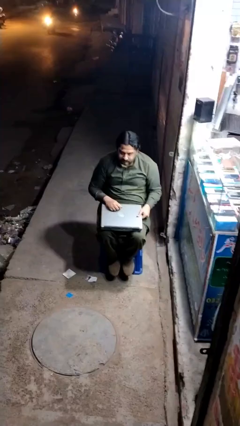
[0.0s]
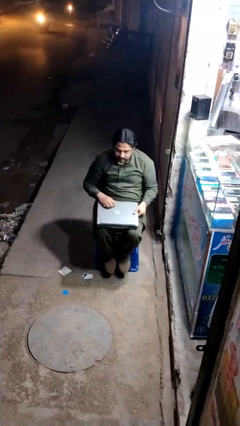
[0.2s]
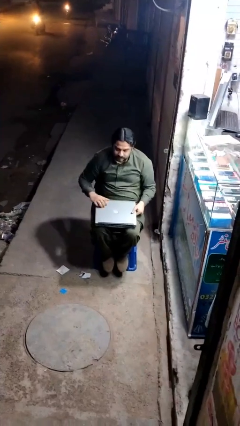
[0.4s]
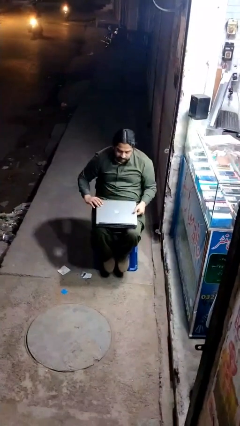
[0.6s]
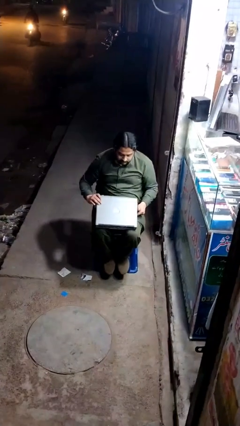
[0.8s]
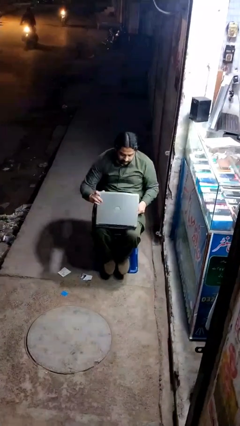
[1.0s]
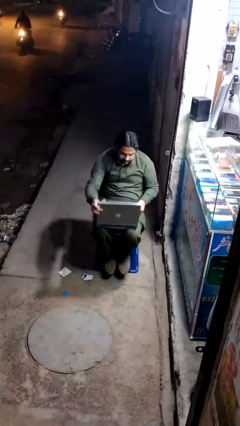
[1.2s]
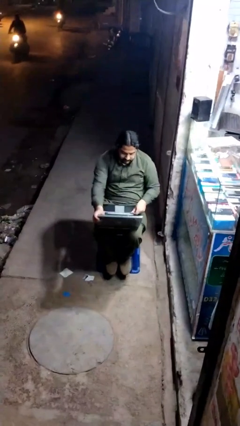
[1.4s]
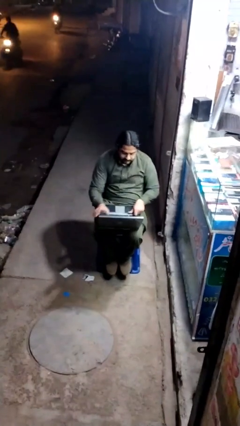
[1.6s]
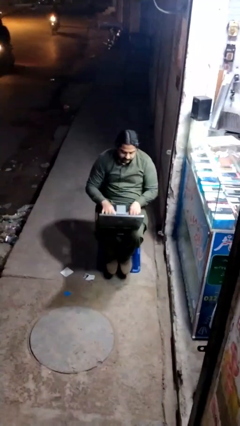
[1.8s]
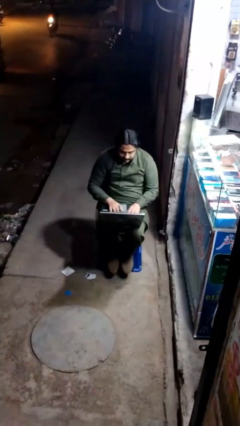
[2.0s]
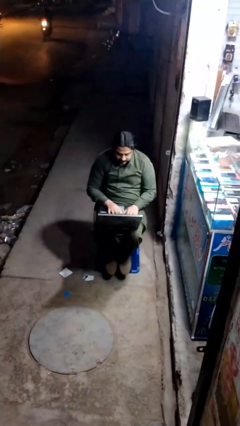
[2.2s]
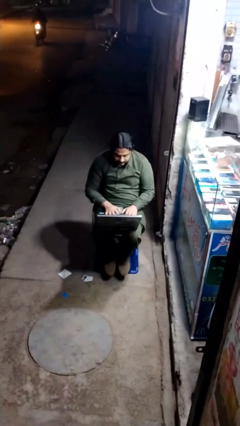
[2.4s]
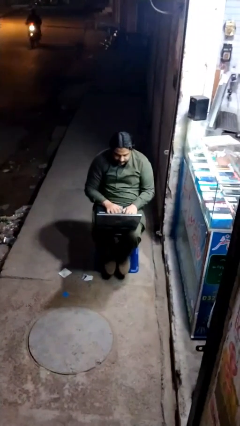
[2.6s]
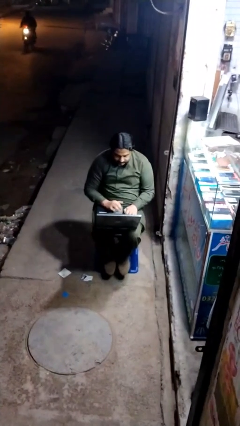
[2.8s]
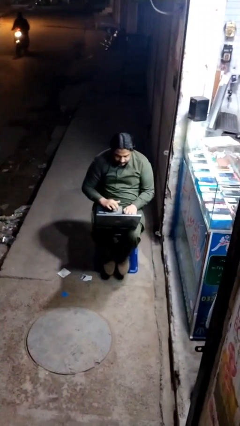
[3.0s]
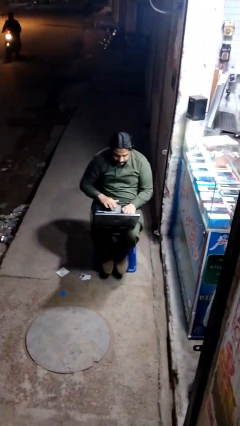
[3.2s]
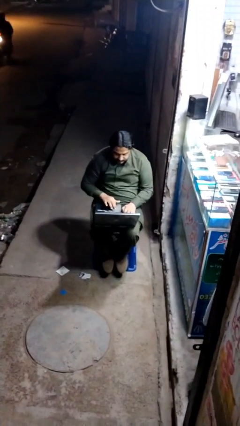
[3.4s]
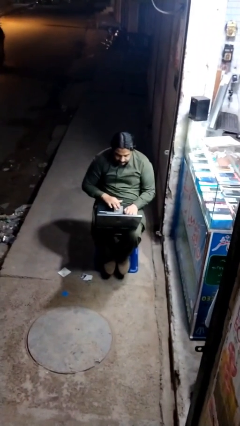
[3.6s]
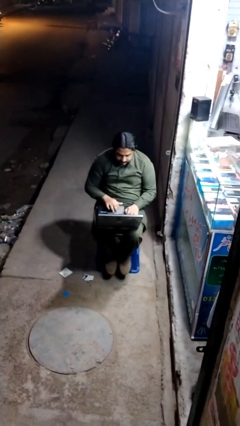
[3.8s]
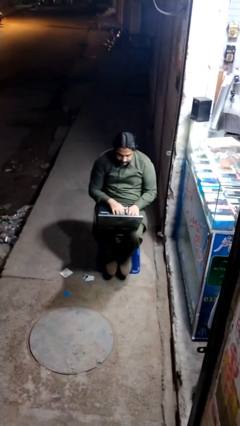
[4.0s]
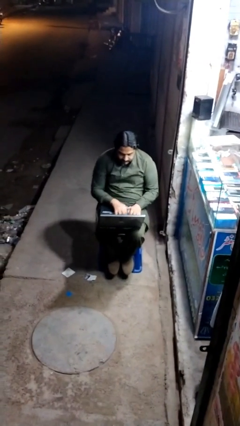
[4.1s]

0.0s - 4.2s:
person interacts with laptop

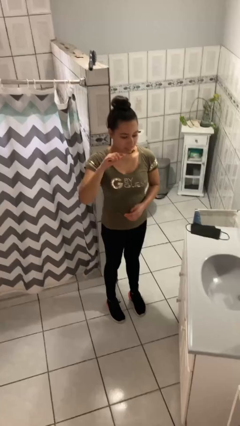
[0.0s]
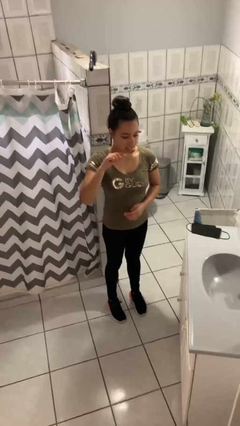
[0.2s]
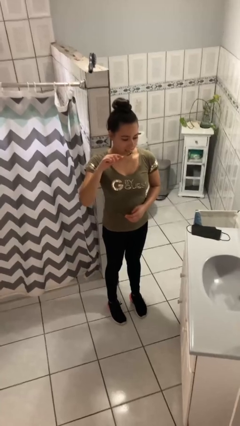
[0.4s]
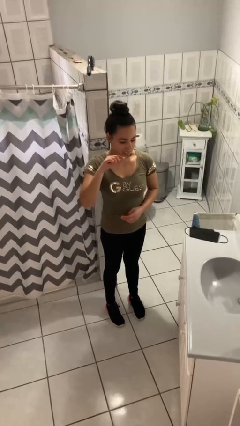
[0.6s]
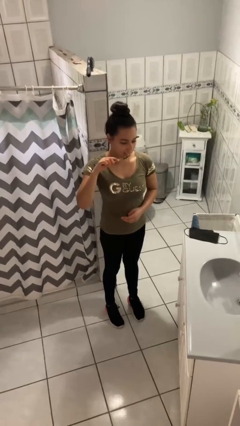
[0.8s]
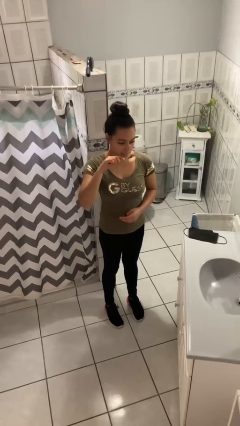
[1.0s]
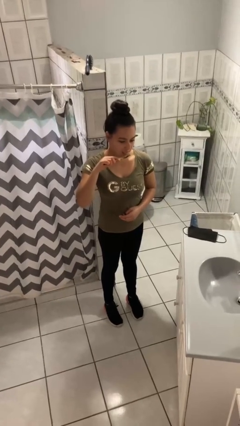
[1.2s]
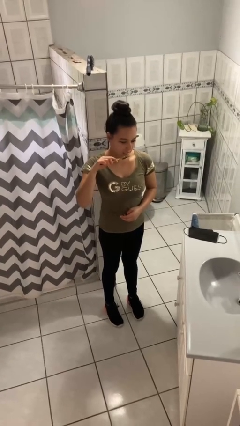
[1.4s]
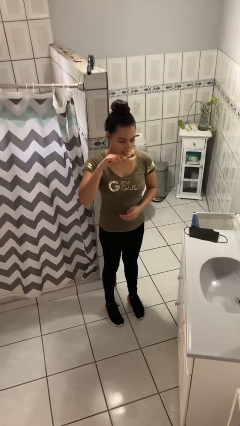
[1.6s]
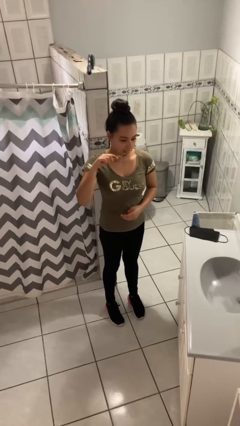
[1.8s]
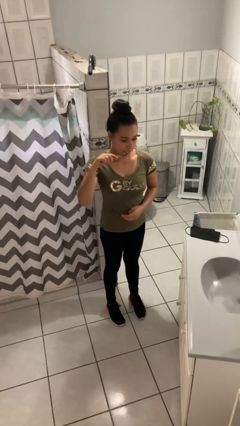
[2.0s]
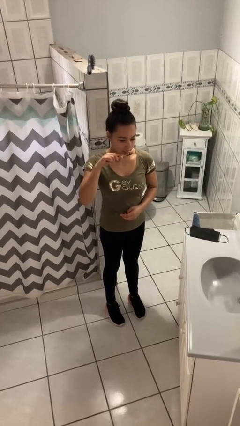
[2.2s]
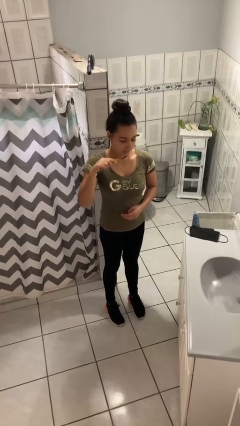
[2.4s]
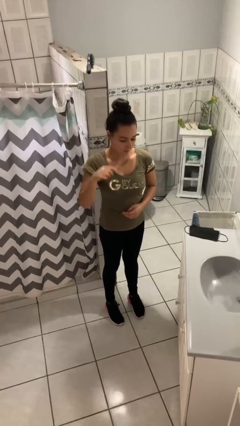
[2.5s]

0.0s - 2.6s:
person brushes teeth

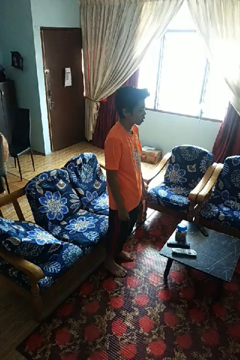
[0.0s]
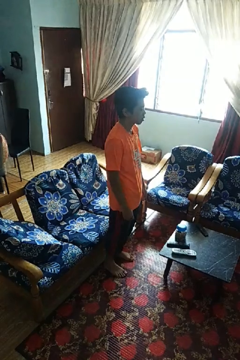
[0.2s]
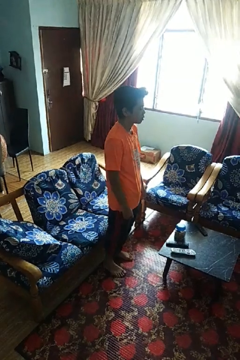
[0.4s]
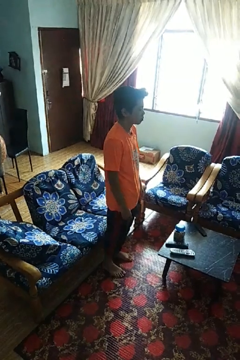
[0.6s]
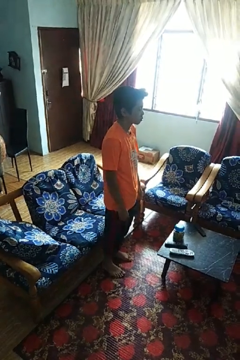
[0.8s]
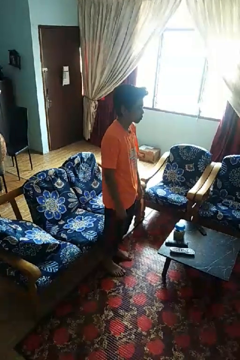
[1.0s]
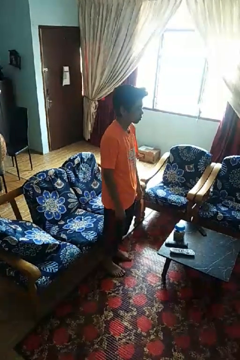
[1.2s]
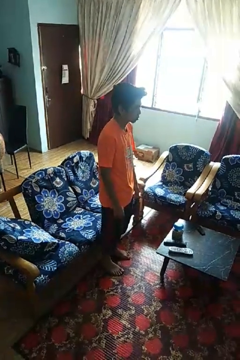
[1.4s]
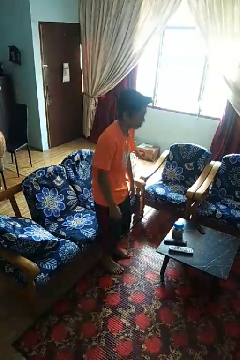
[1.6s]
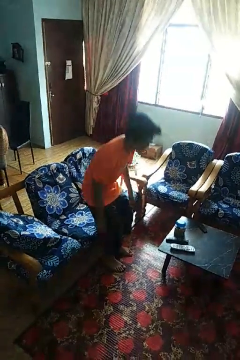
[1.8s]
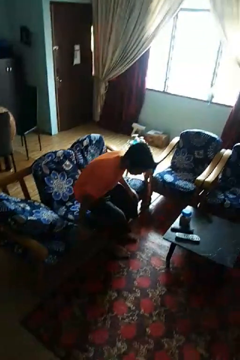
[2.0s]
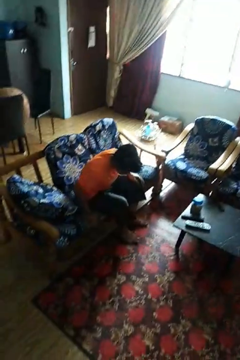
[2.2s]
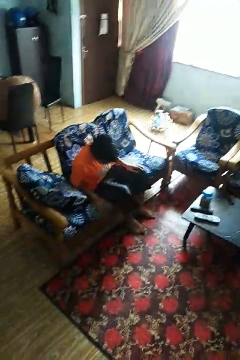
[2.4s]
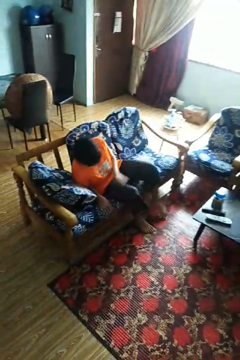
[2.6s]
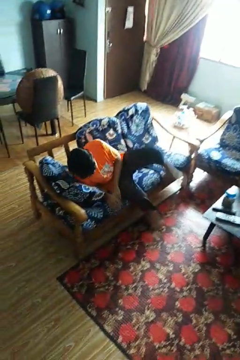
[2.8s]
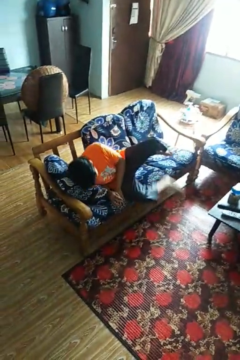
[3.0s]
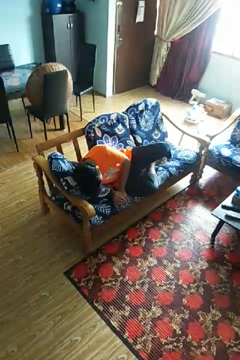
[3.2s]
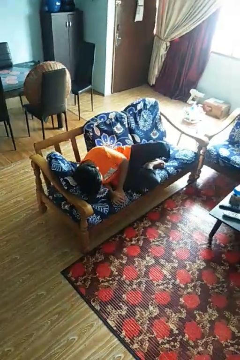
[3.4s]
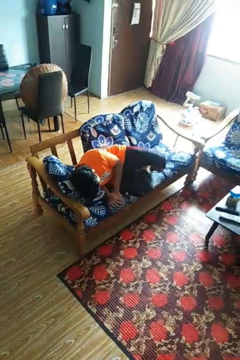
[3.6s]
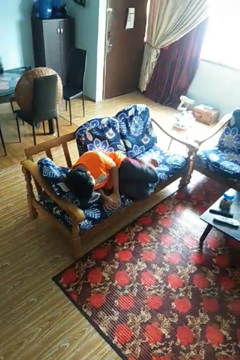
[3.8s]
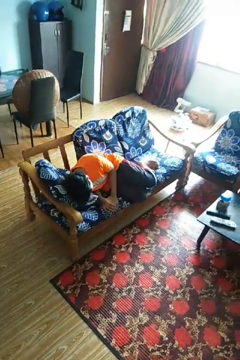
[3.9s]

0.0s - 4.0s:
person lies down on couch

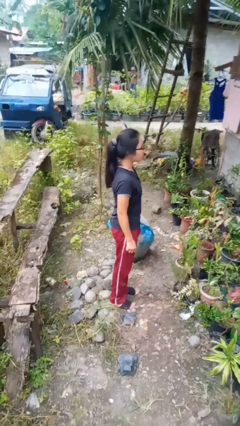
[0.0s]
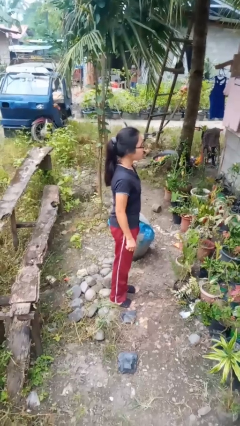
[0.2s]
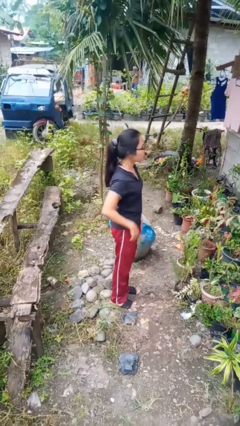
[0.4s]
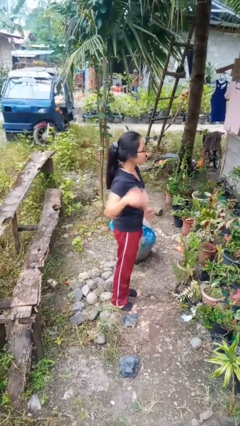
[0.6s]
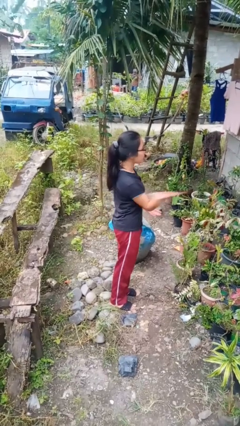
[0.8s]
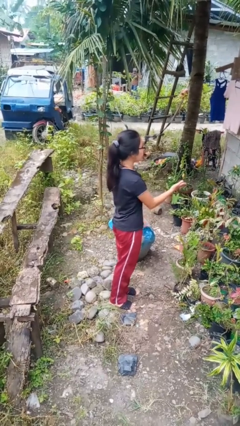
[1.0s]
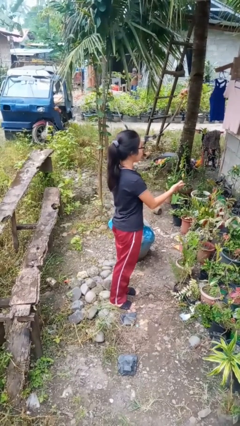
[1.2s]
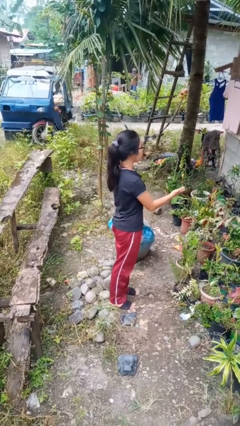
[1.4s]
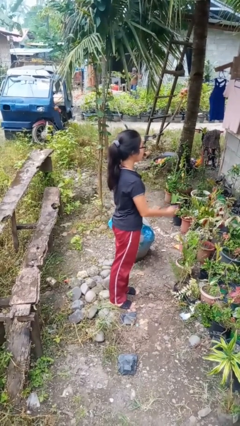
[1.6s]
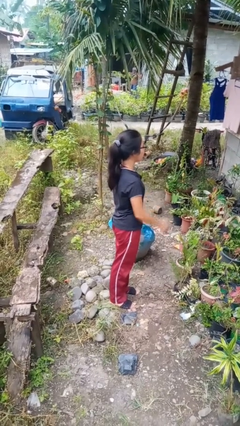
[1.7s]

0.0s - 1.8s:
person karate chop

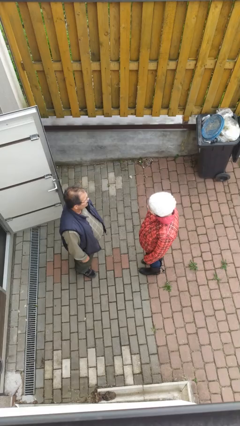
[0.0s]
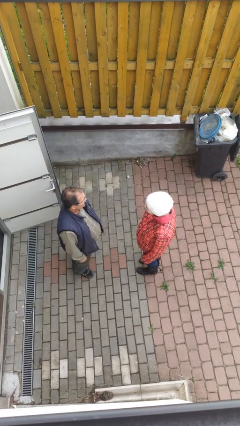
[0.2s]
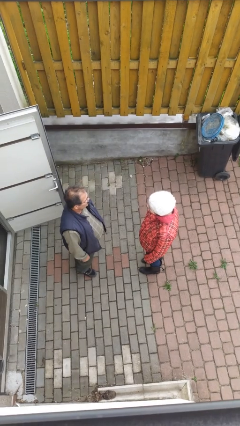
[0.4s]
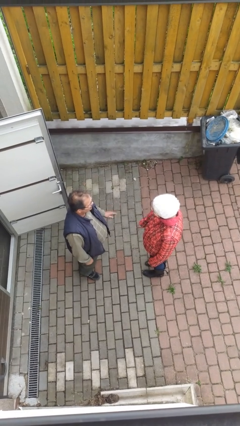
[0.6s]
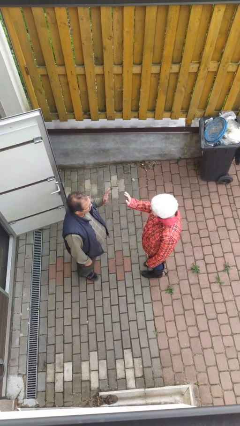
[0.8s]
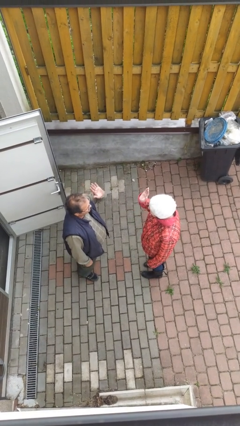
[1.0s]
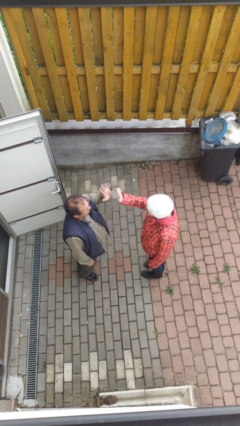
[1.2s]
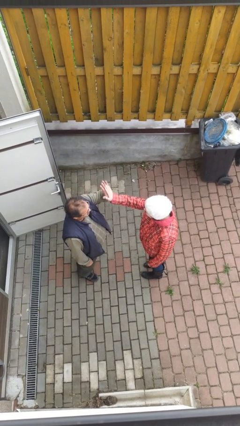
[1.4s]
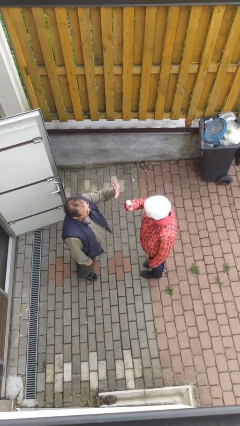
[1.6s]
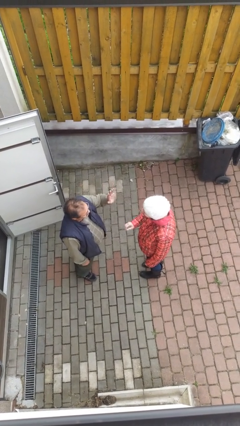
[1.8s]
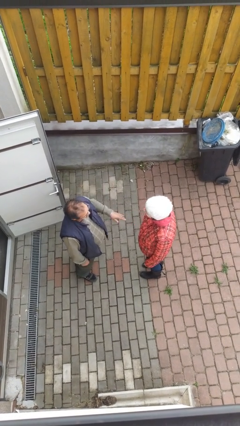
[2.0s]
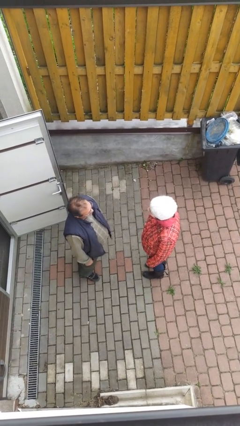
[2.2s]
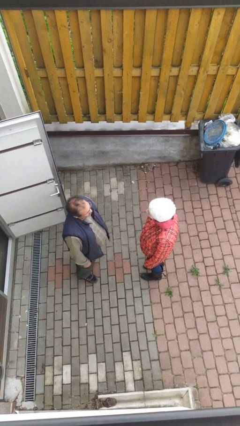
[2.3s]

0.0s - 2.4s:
person highfives hand

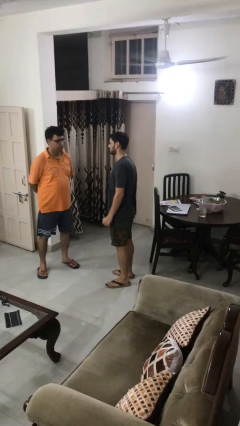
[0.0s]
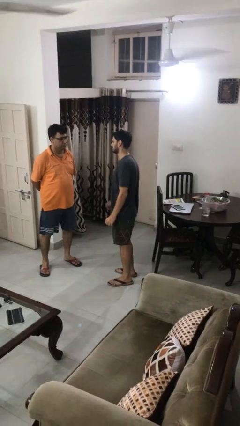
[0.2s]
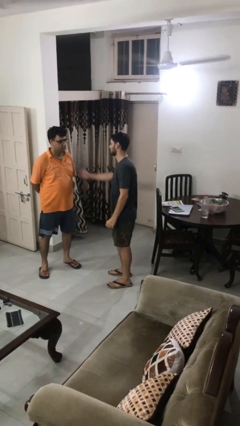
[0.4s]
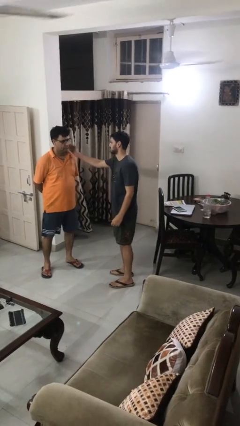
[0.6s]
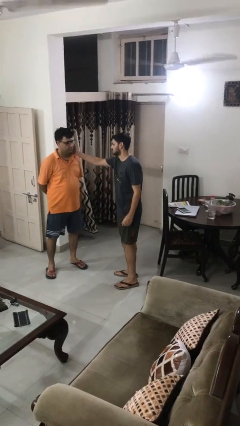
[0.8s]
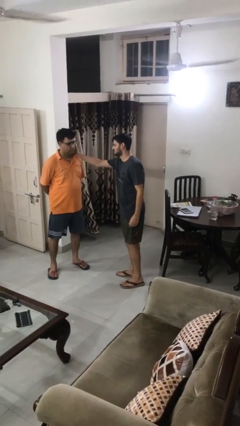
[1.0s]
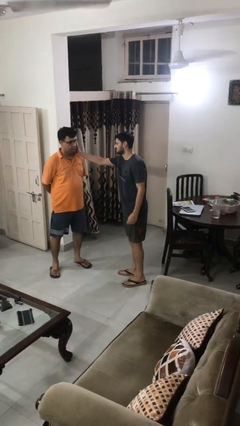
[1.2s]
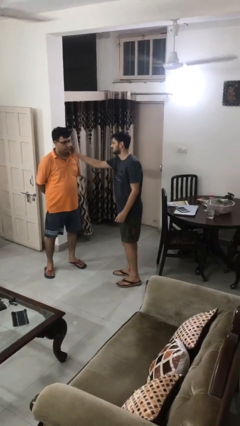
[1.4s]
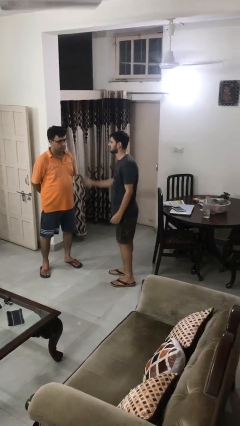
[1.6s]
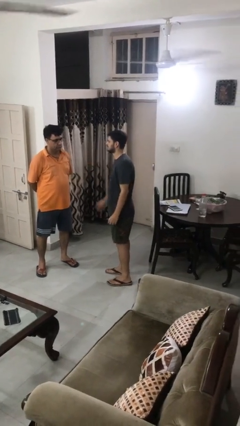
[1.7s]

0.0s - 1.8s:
person touches face of person

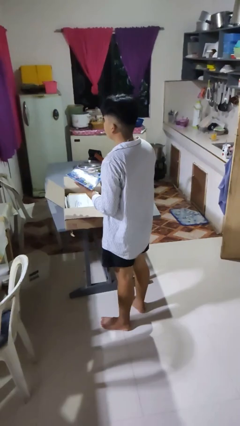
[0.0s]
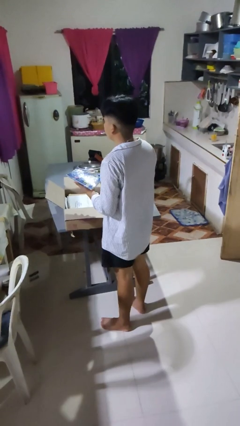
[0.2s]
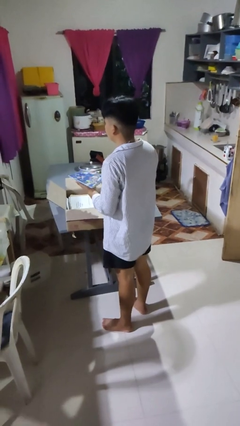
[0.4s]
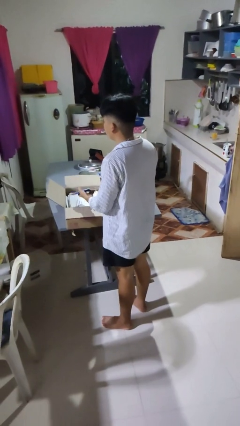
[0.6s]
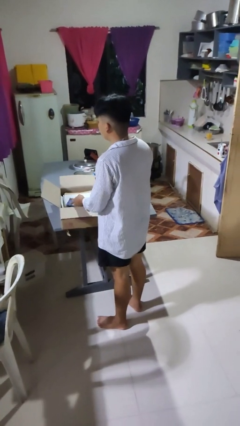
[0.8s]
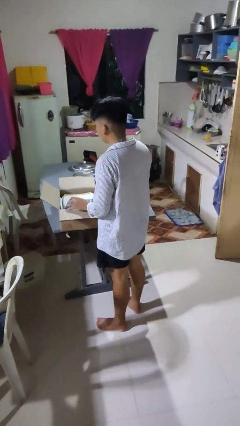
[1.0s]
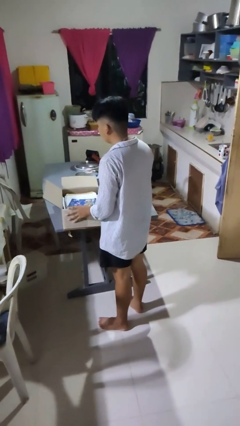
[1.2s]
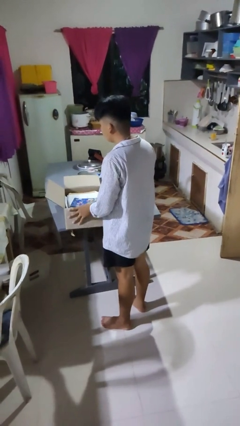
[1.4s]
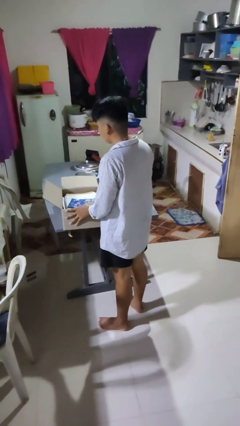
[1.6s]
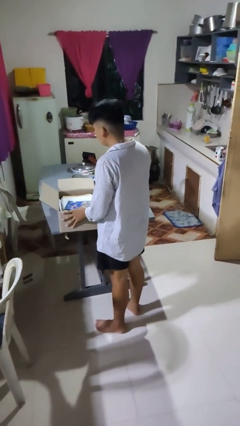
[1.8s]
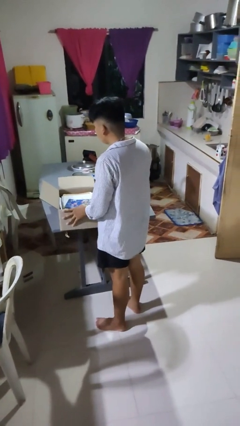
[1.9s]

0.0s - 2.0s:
person puts object into box
